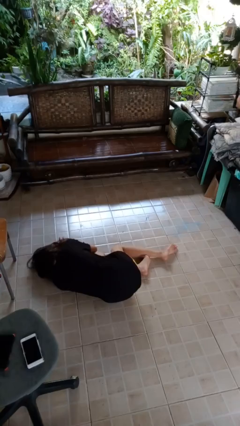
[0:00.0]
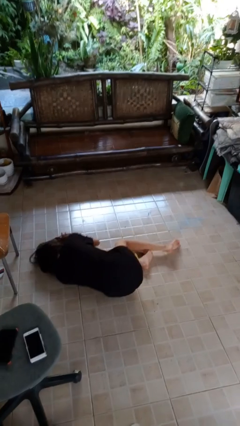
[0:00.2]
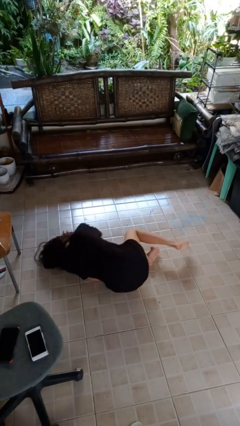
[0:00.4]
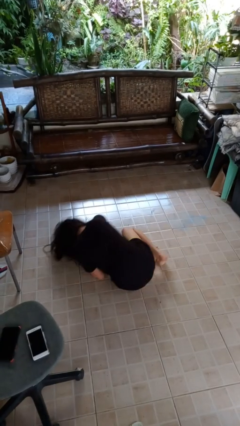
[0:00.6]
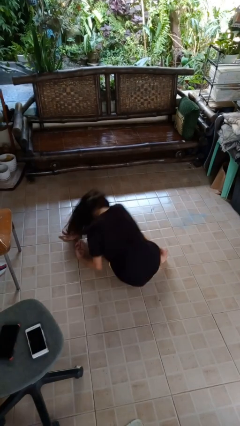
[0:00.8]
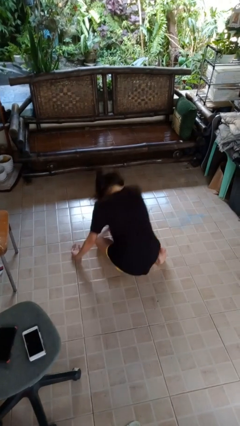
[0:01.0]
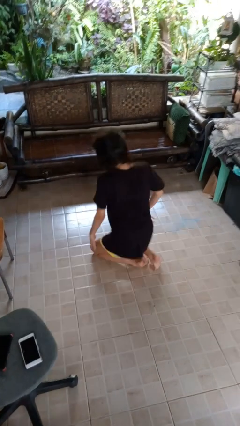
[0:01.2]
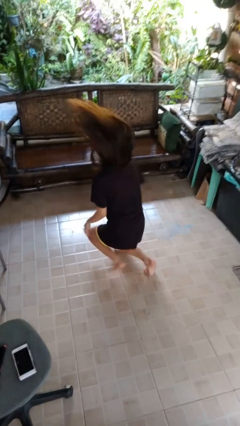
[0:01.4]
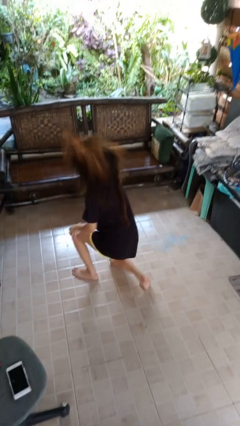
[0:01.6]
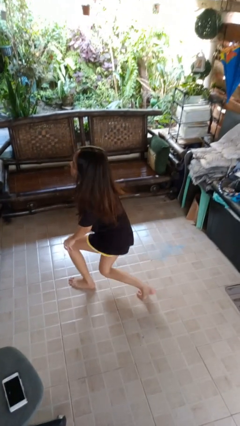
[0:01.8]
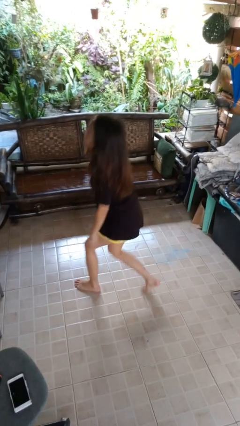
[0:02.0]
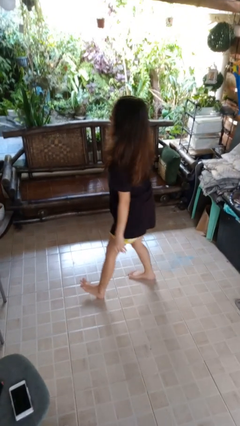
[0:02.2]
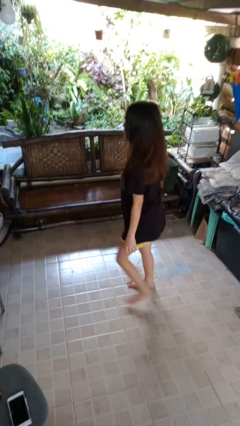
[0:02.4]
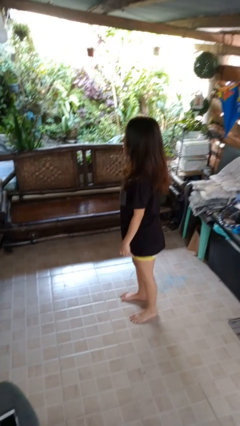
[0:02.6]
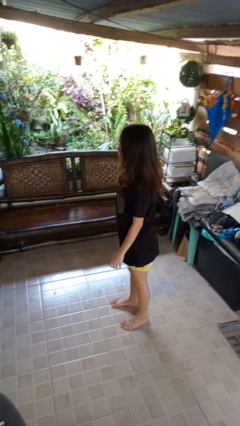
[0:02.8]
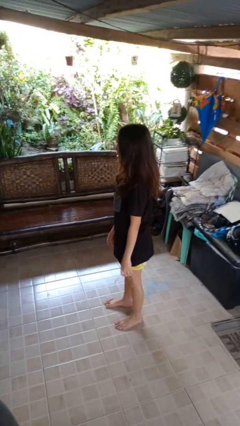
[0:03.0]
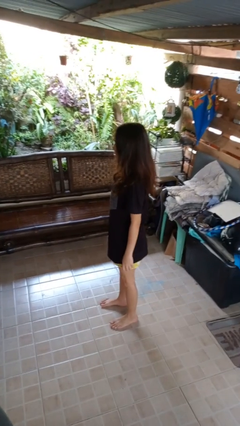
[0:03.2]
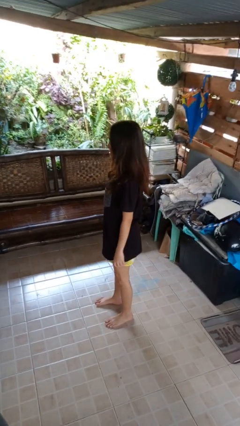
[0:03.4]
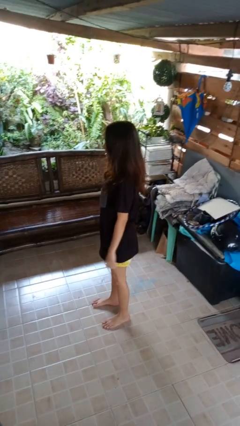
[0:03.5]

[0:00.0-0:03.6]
person stands up from floor

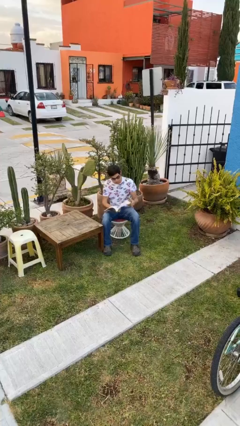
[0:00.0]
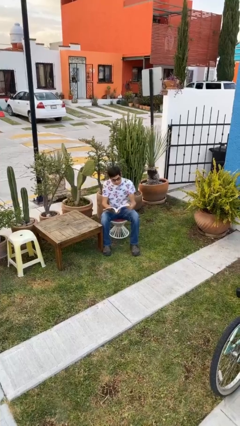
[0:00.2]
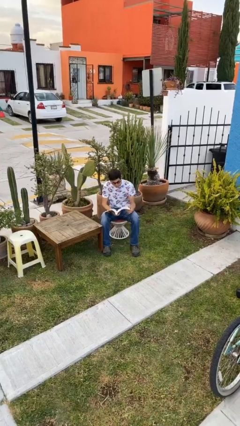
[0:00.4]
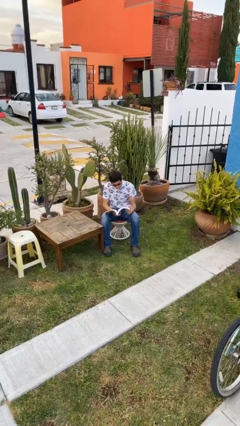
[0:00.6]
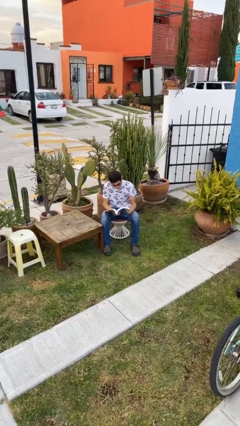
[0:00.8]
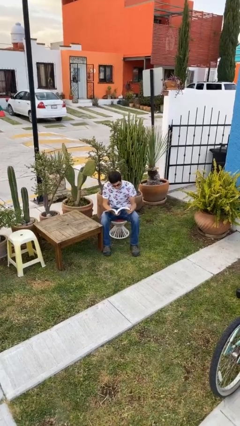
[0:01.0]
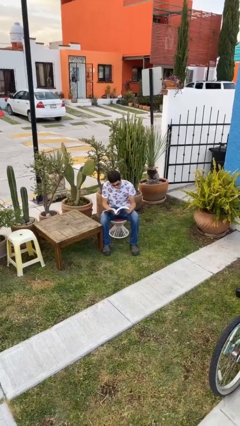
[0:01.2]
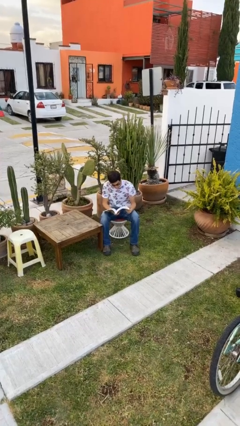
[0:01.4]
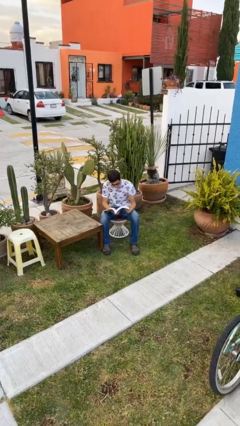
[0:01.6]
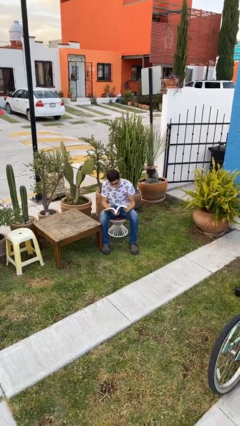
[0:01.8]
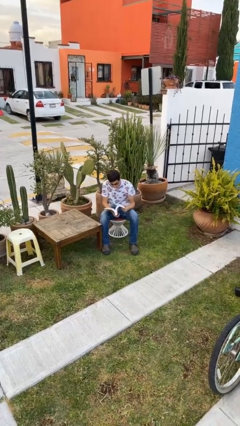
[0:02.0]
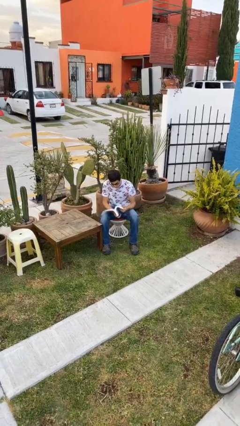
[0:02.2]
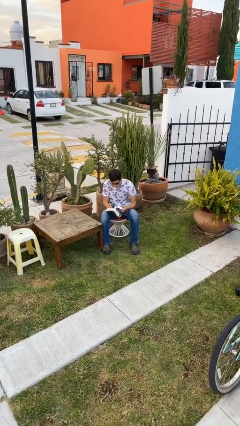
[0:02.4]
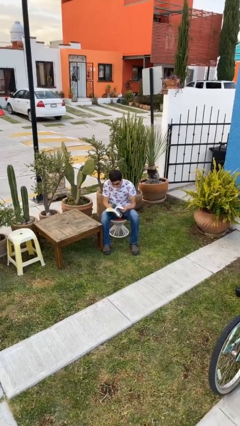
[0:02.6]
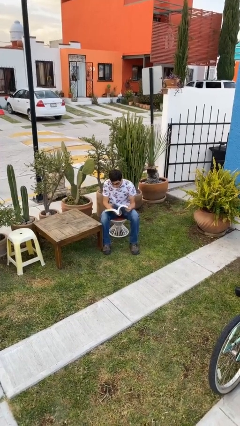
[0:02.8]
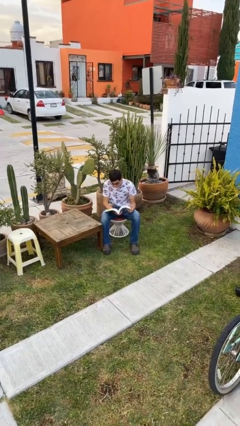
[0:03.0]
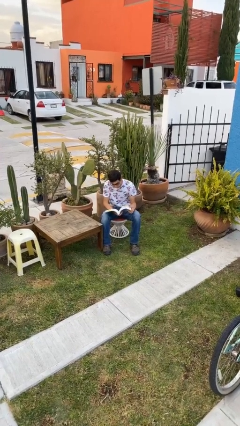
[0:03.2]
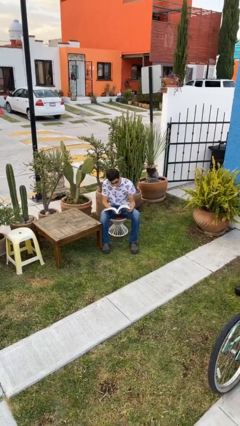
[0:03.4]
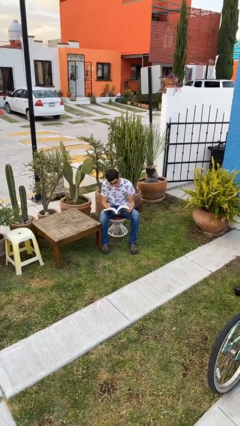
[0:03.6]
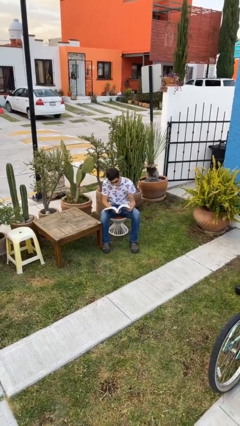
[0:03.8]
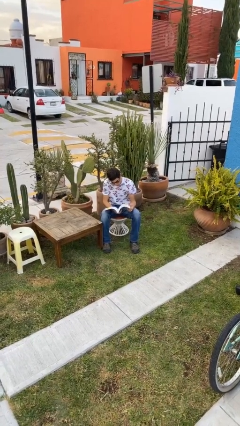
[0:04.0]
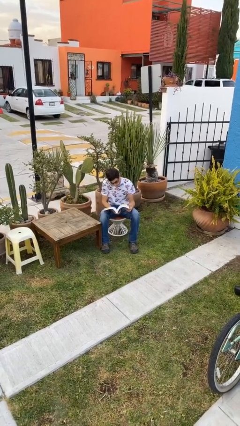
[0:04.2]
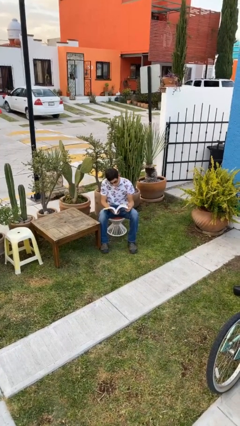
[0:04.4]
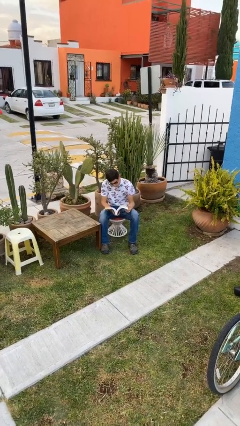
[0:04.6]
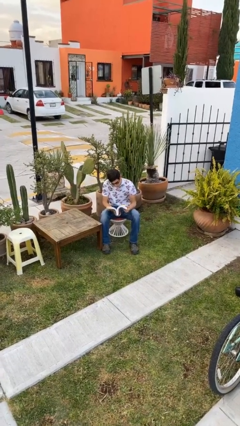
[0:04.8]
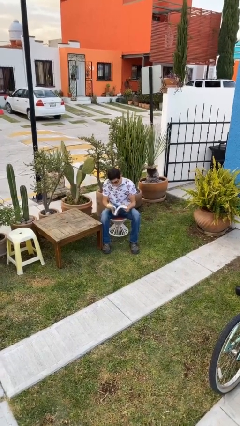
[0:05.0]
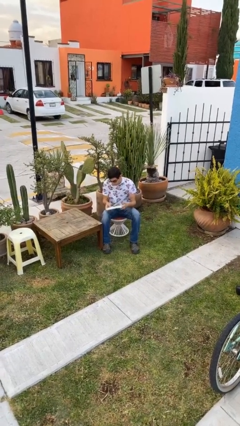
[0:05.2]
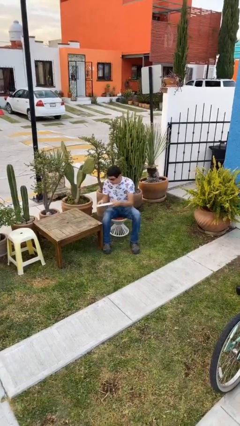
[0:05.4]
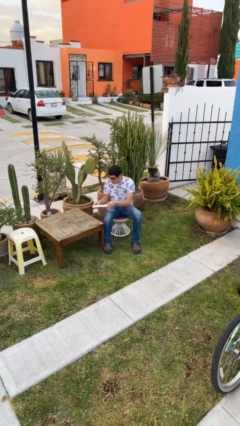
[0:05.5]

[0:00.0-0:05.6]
person reads document

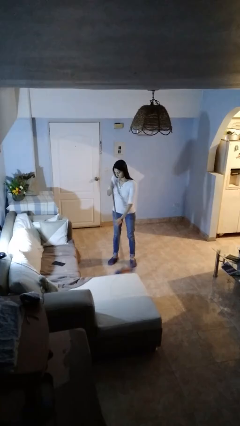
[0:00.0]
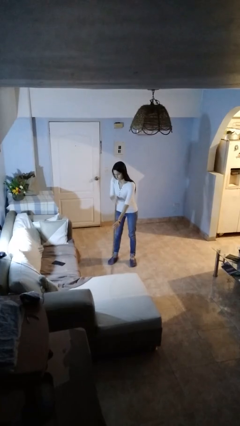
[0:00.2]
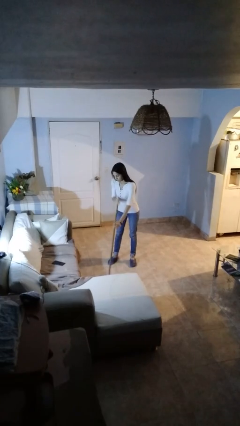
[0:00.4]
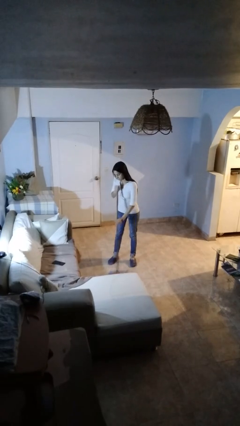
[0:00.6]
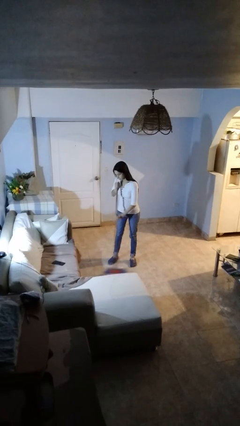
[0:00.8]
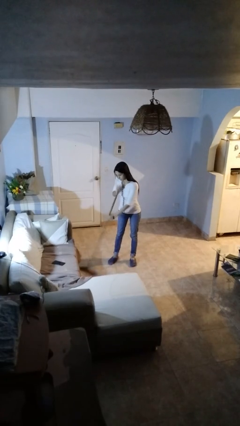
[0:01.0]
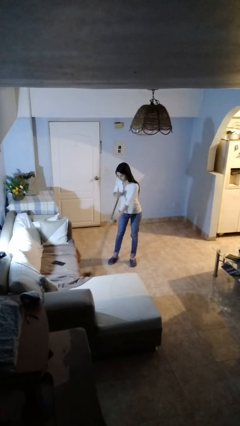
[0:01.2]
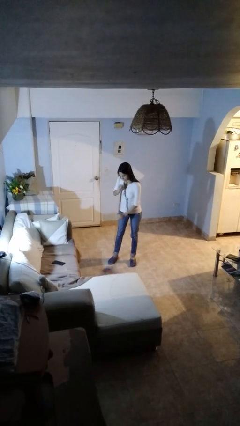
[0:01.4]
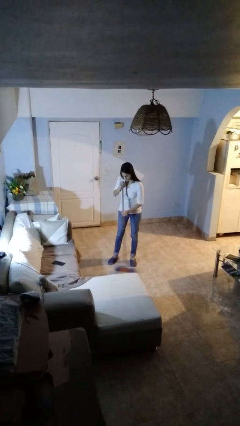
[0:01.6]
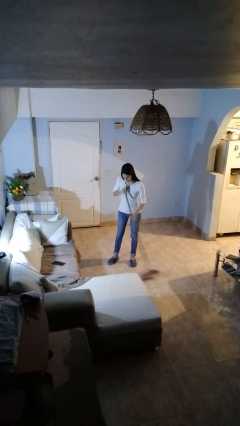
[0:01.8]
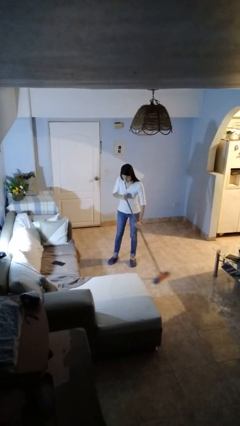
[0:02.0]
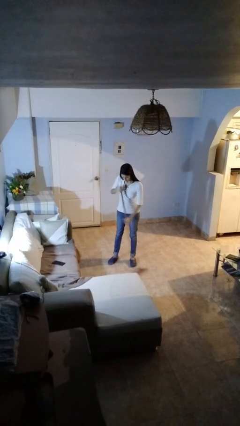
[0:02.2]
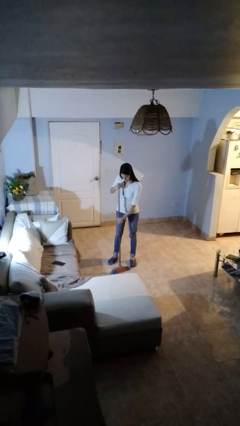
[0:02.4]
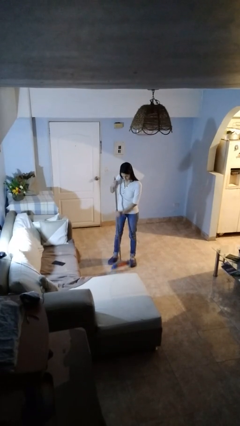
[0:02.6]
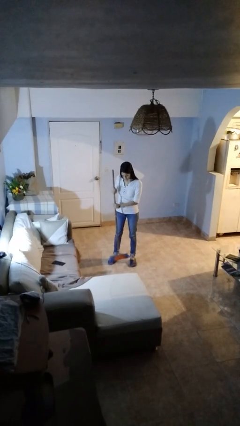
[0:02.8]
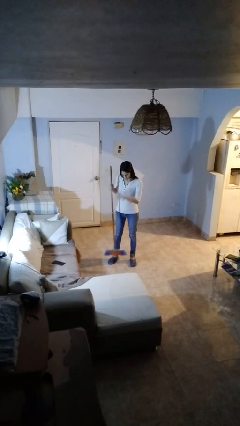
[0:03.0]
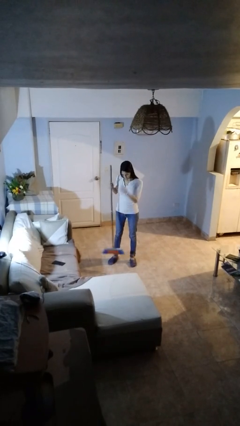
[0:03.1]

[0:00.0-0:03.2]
person sweeps floor

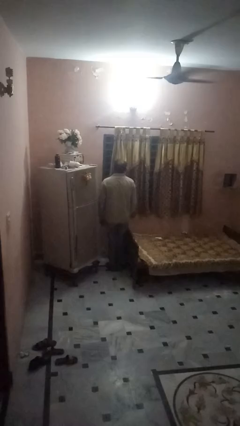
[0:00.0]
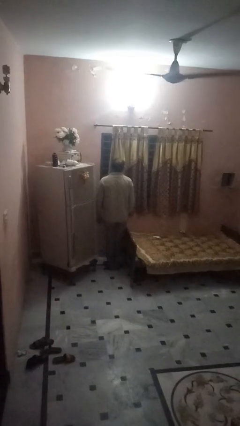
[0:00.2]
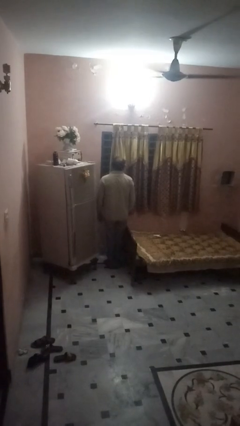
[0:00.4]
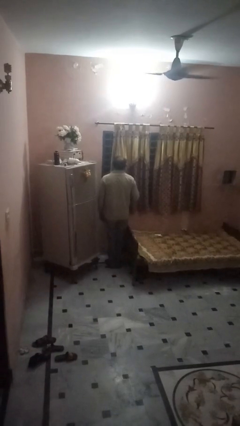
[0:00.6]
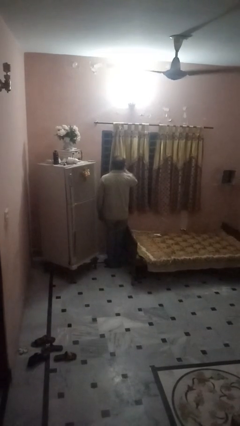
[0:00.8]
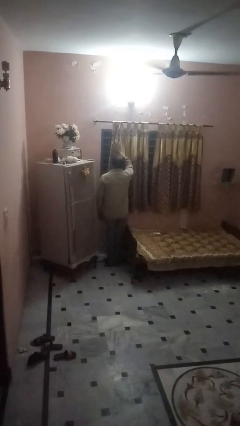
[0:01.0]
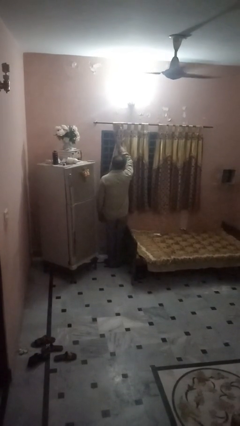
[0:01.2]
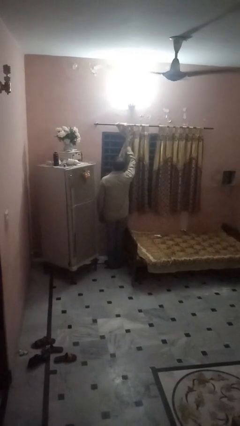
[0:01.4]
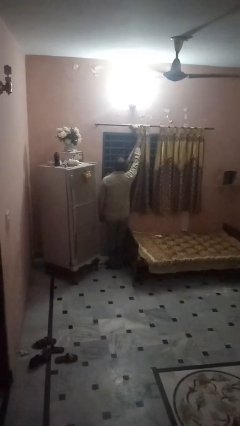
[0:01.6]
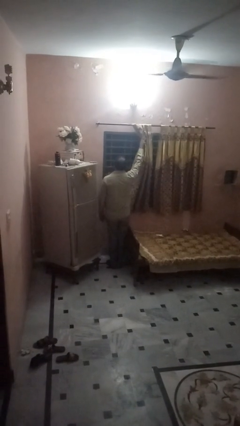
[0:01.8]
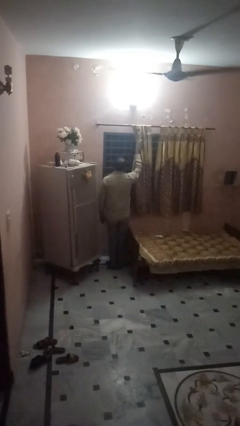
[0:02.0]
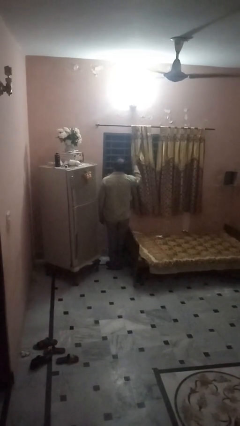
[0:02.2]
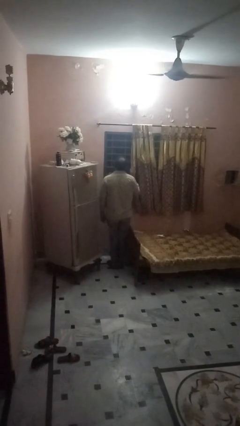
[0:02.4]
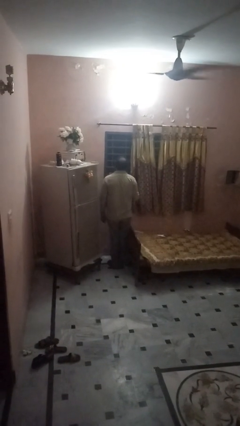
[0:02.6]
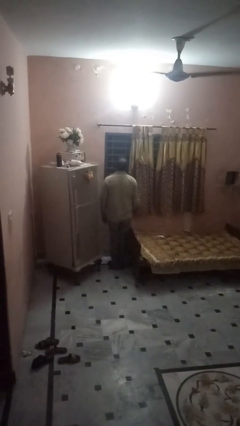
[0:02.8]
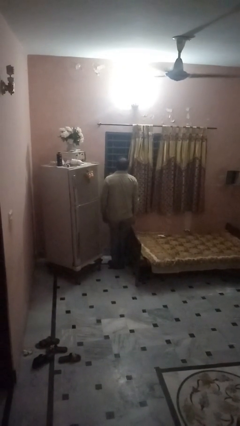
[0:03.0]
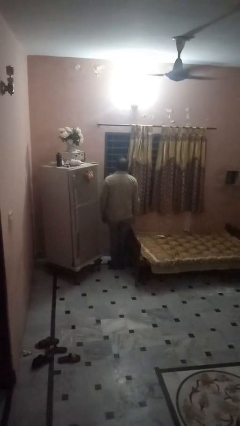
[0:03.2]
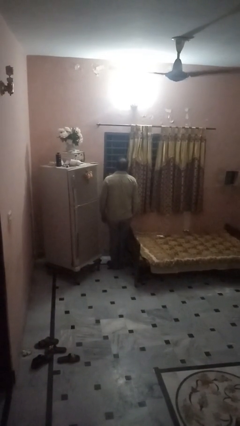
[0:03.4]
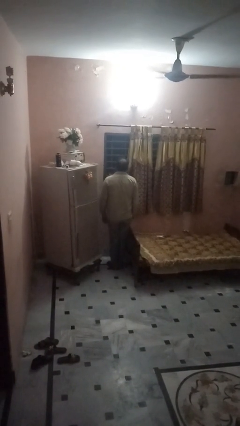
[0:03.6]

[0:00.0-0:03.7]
person opens curtains

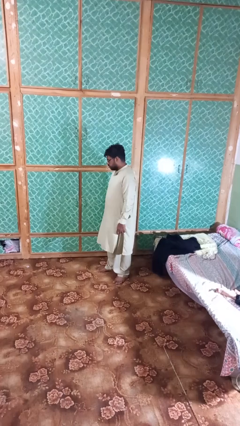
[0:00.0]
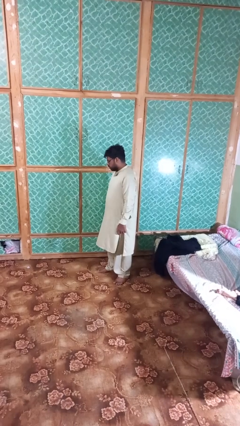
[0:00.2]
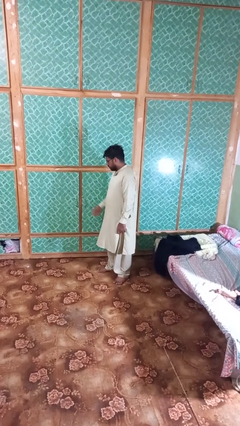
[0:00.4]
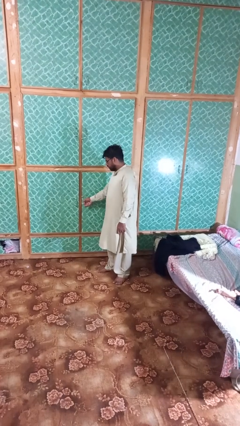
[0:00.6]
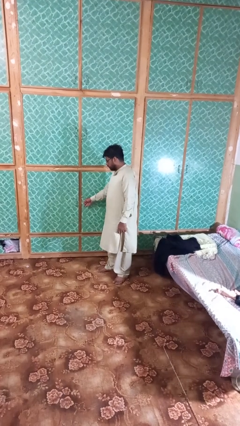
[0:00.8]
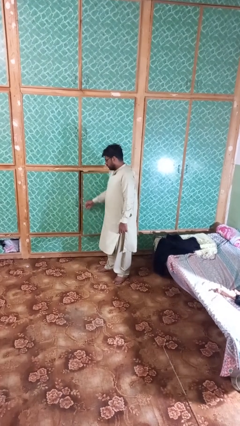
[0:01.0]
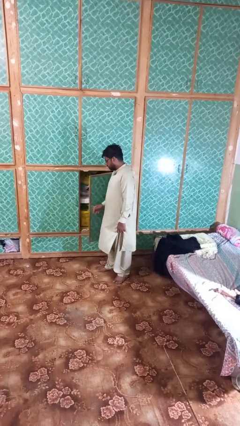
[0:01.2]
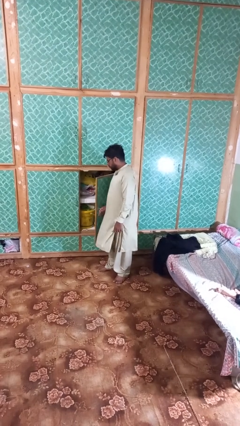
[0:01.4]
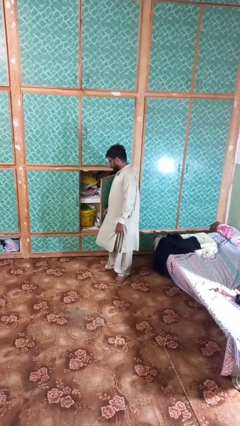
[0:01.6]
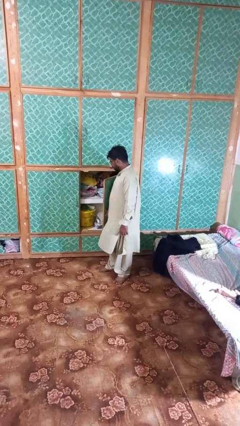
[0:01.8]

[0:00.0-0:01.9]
person opens closet door
